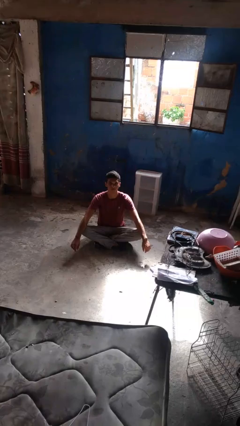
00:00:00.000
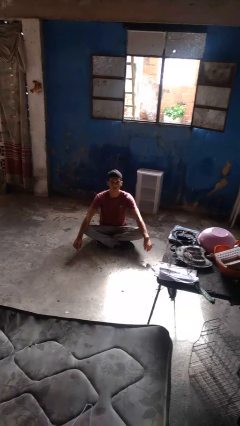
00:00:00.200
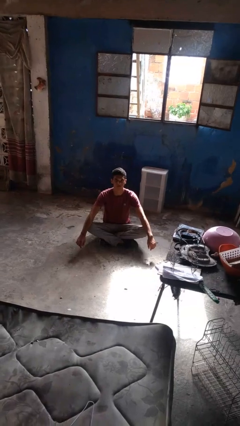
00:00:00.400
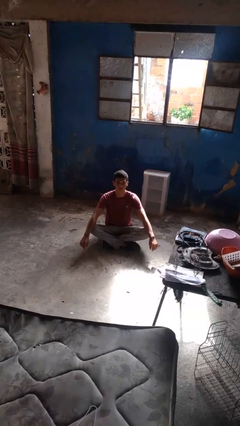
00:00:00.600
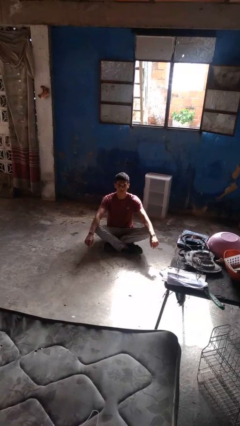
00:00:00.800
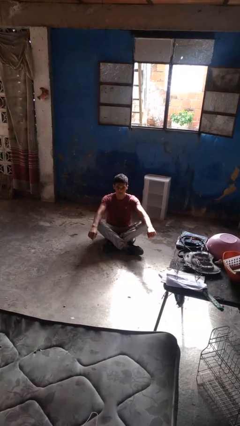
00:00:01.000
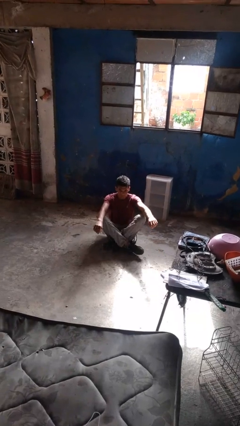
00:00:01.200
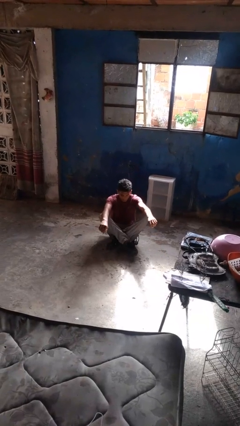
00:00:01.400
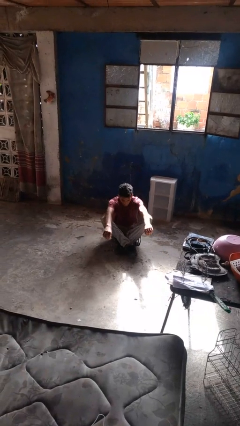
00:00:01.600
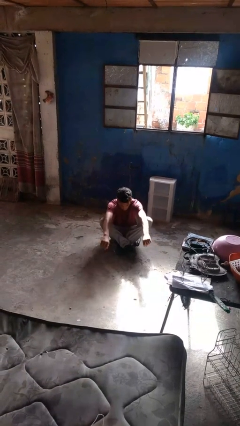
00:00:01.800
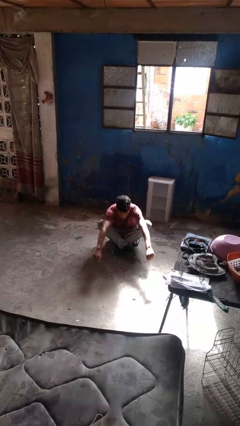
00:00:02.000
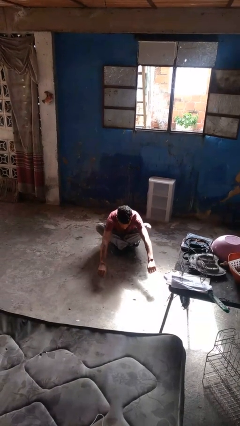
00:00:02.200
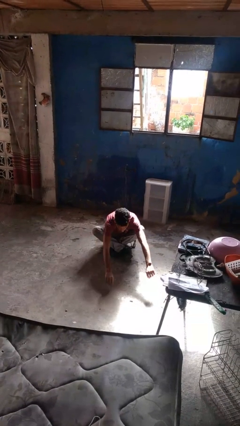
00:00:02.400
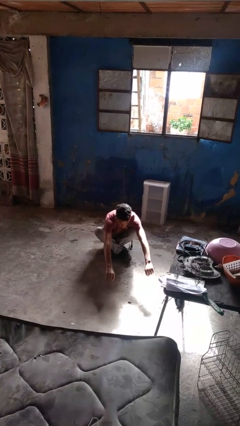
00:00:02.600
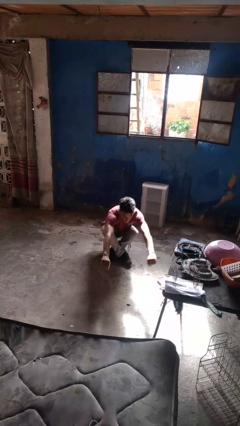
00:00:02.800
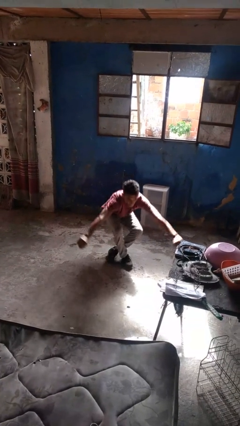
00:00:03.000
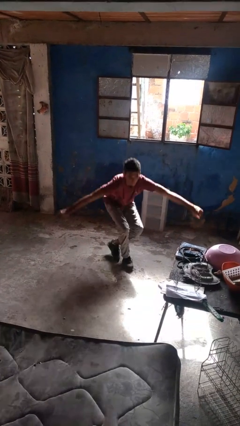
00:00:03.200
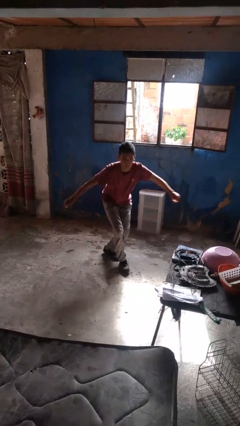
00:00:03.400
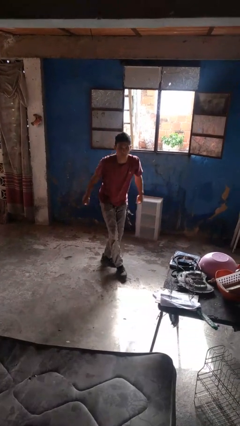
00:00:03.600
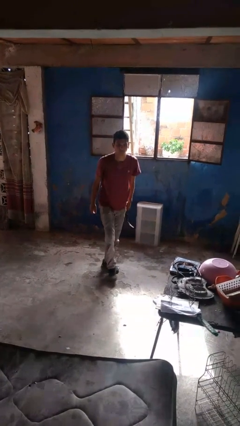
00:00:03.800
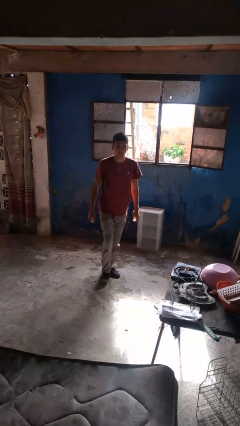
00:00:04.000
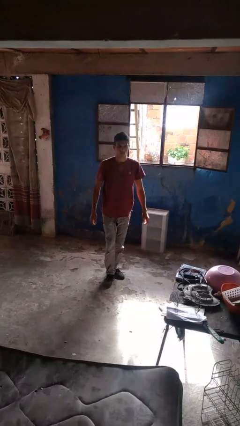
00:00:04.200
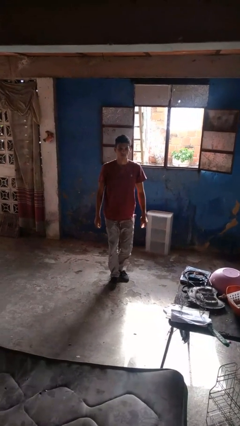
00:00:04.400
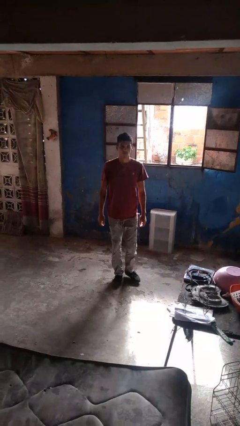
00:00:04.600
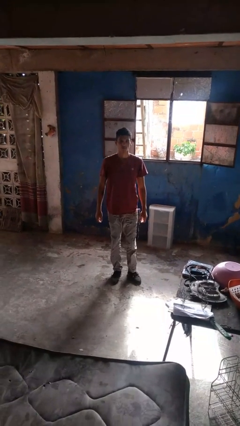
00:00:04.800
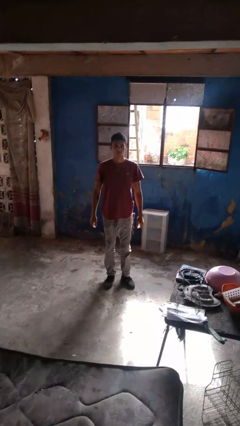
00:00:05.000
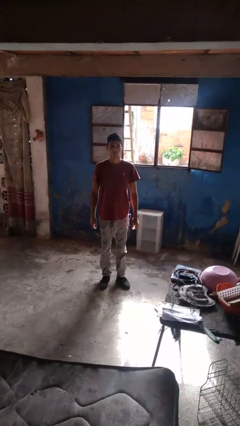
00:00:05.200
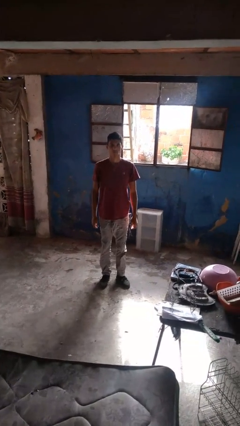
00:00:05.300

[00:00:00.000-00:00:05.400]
person stands up from floor

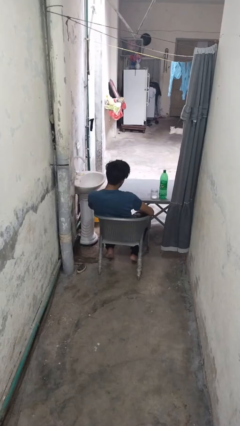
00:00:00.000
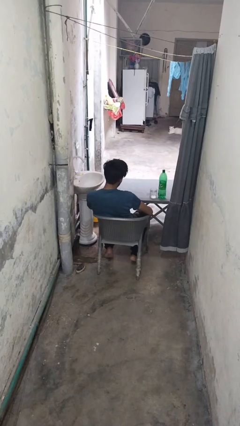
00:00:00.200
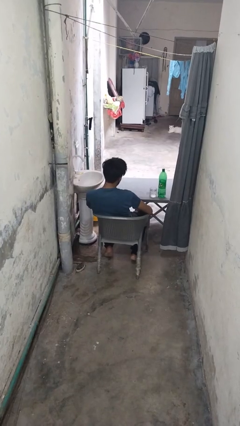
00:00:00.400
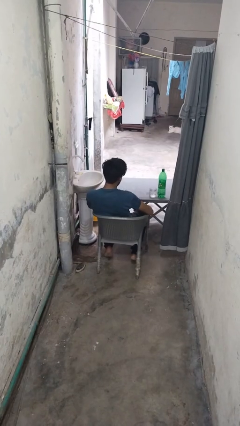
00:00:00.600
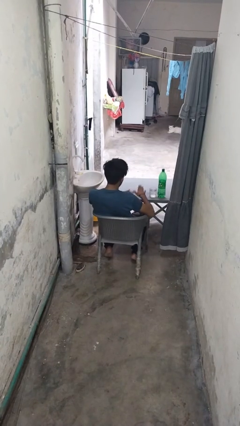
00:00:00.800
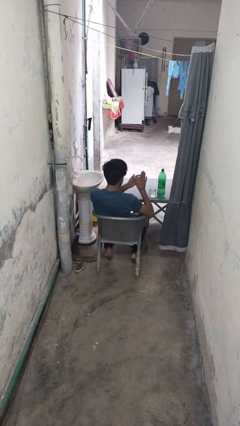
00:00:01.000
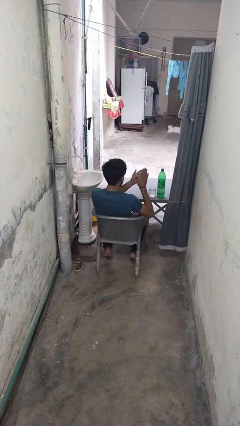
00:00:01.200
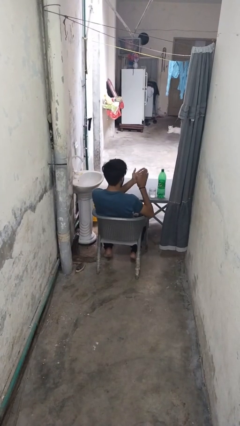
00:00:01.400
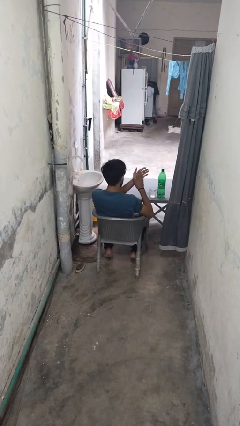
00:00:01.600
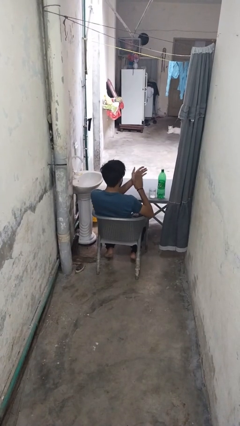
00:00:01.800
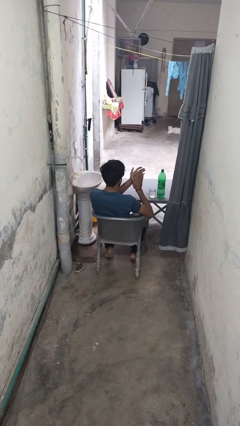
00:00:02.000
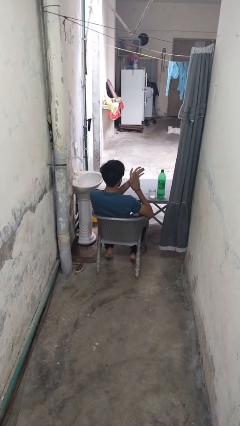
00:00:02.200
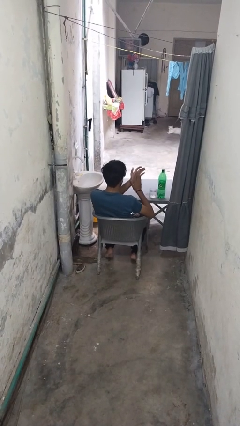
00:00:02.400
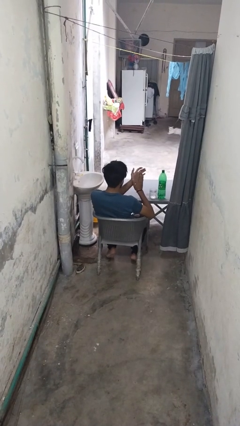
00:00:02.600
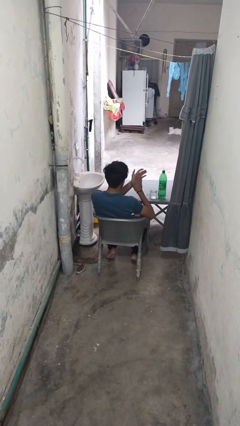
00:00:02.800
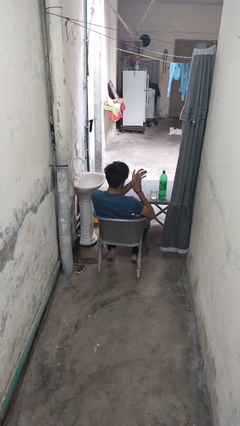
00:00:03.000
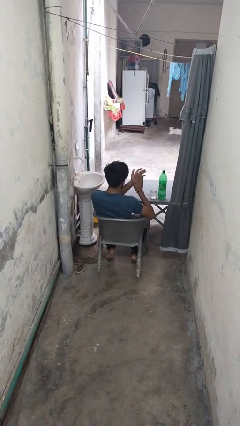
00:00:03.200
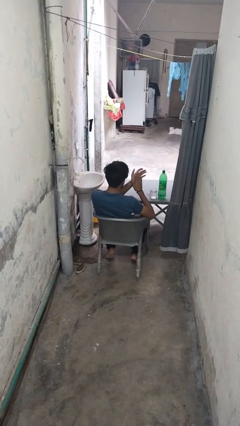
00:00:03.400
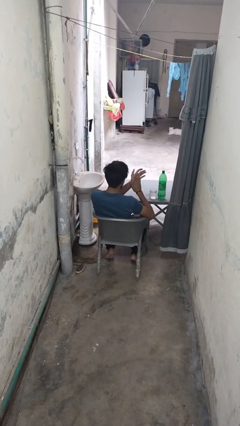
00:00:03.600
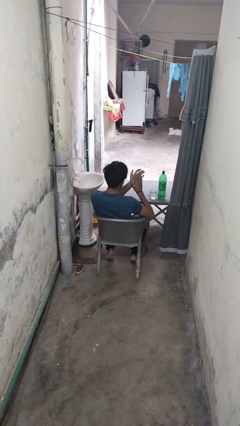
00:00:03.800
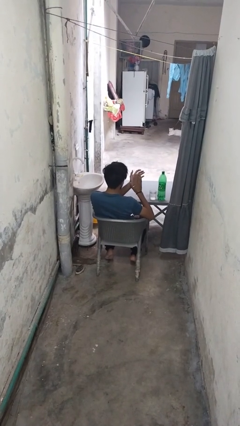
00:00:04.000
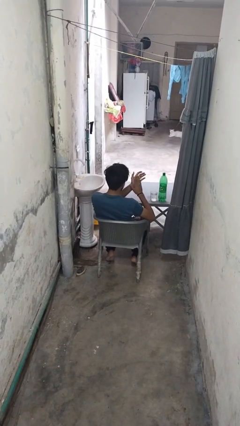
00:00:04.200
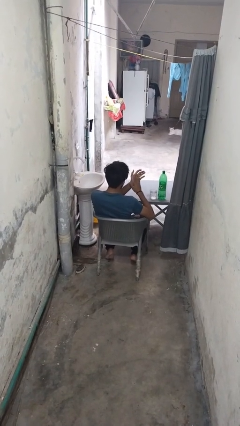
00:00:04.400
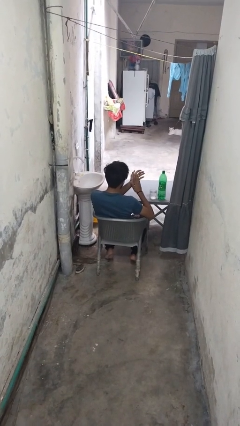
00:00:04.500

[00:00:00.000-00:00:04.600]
person claps hands

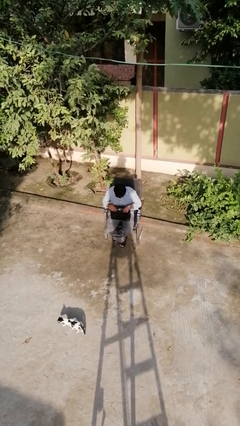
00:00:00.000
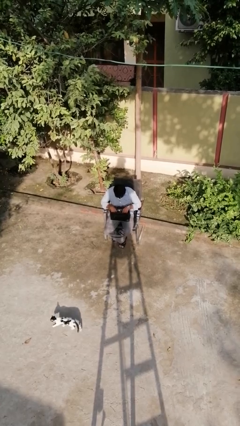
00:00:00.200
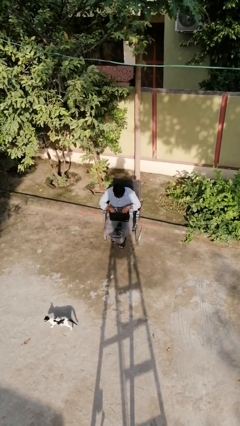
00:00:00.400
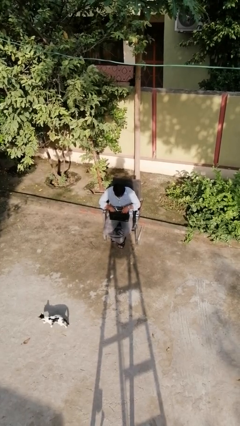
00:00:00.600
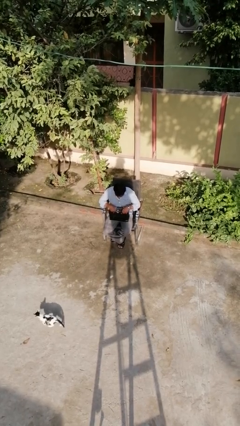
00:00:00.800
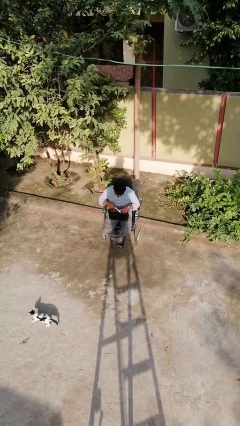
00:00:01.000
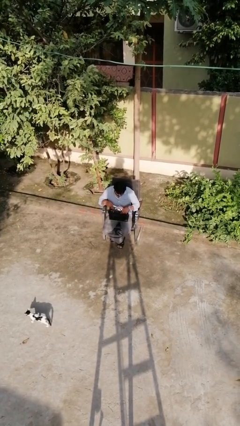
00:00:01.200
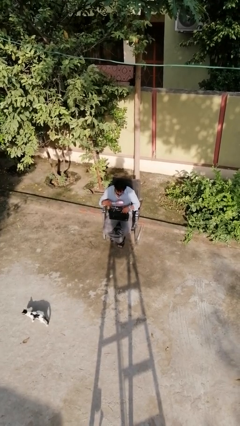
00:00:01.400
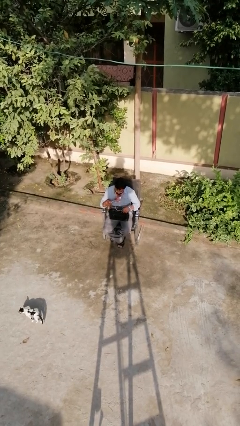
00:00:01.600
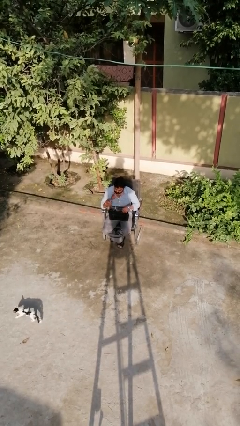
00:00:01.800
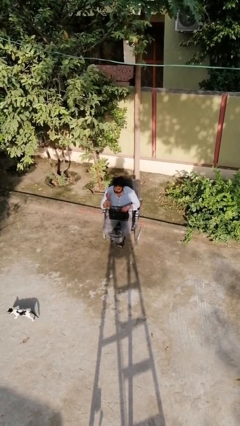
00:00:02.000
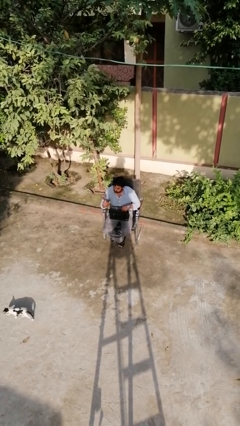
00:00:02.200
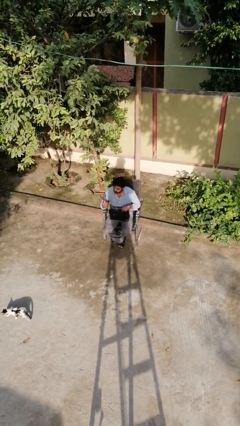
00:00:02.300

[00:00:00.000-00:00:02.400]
person takes object from backpack

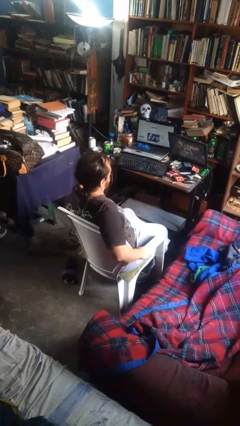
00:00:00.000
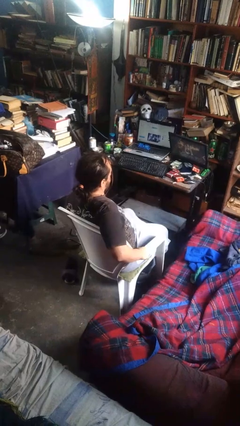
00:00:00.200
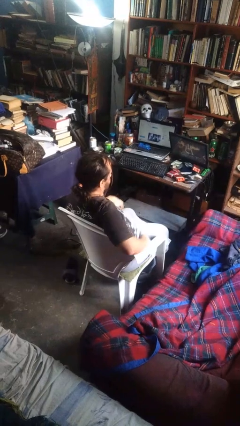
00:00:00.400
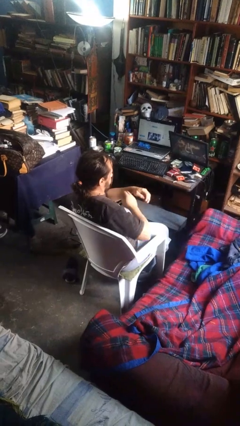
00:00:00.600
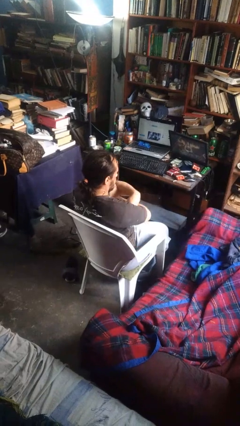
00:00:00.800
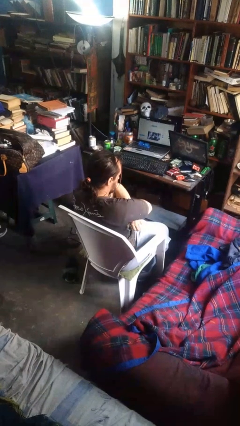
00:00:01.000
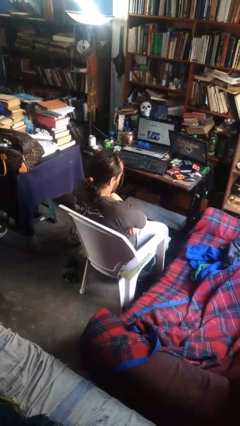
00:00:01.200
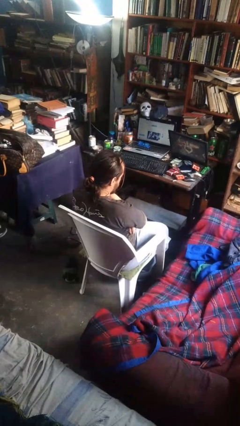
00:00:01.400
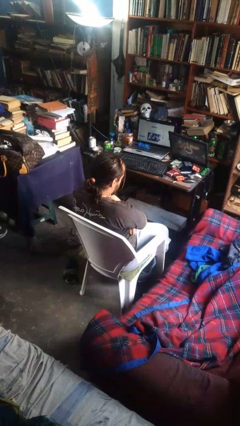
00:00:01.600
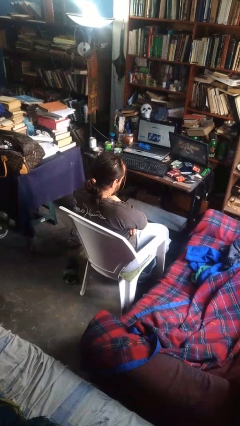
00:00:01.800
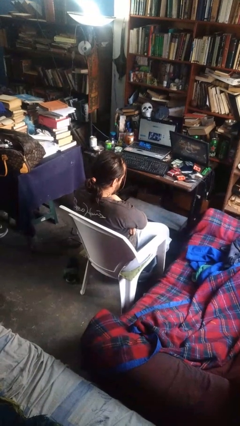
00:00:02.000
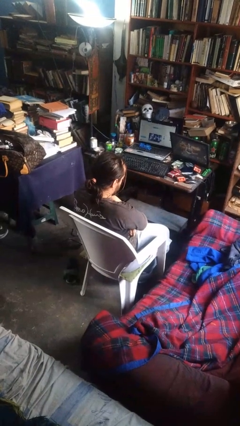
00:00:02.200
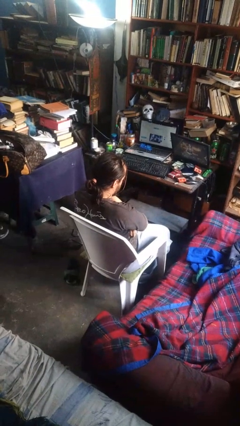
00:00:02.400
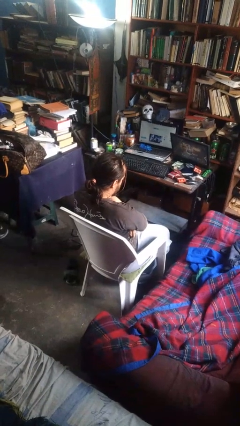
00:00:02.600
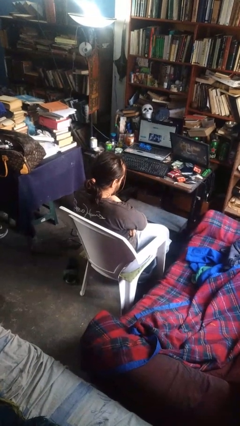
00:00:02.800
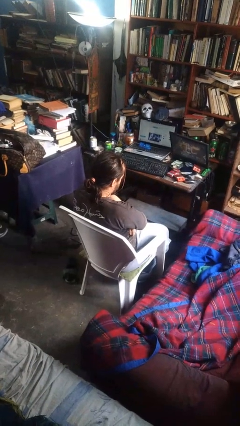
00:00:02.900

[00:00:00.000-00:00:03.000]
person crosses arms

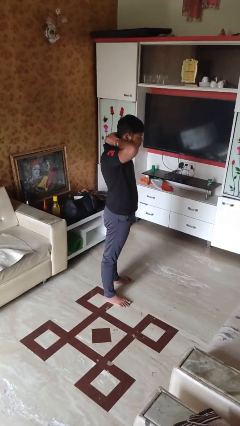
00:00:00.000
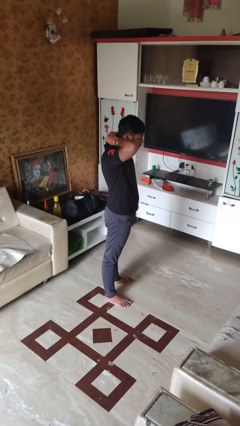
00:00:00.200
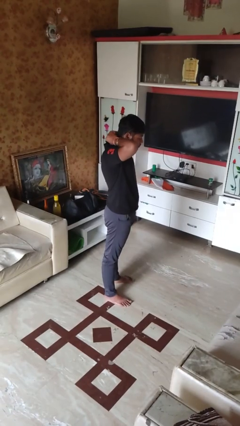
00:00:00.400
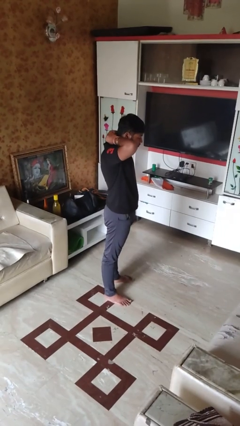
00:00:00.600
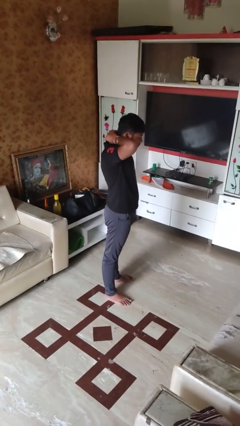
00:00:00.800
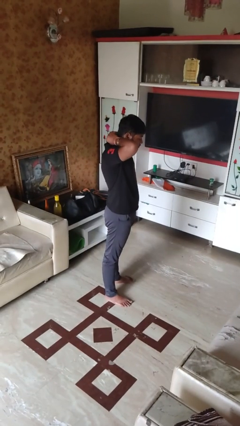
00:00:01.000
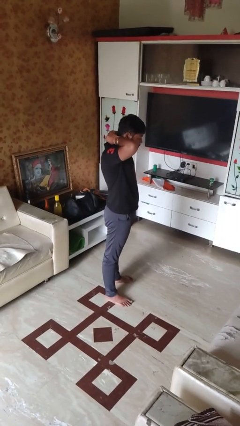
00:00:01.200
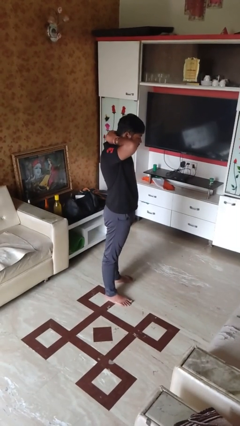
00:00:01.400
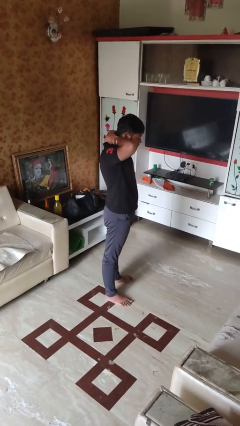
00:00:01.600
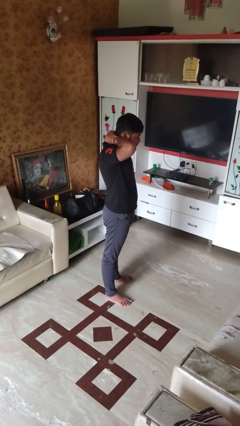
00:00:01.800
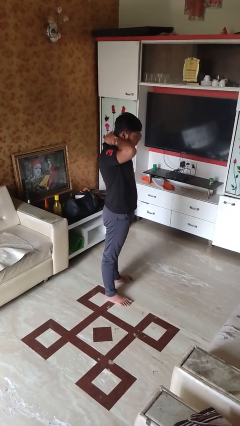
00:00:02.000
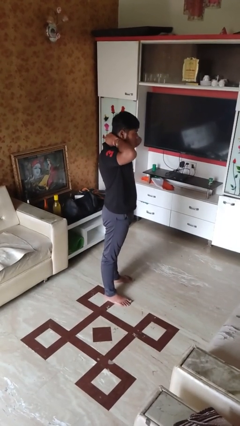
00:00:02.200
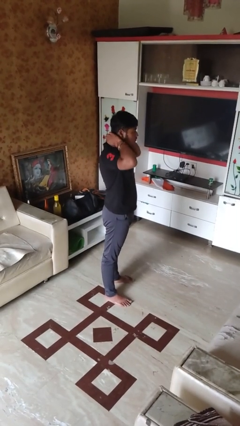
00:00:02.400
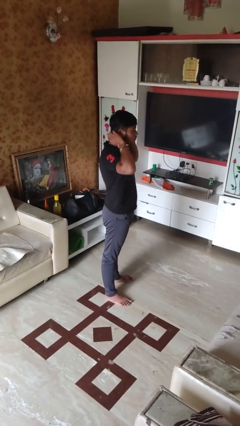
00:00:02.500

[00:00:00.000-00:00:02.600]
person puts on necklace
